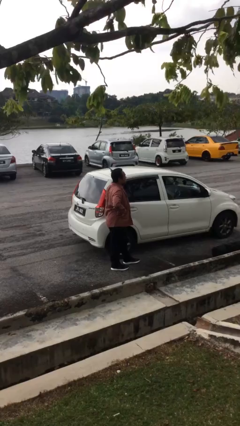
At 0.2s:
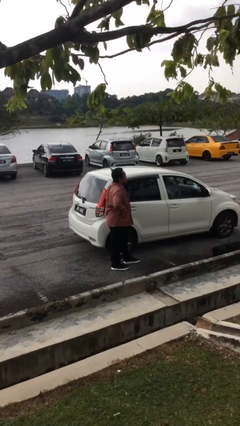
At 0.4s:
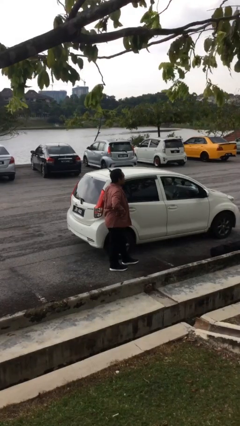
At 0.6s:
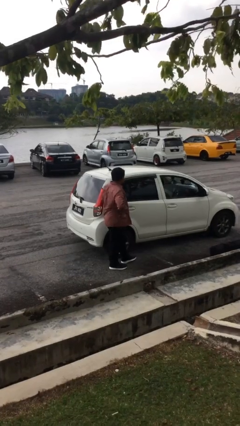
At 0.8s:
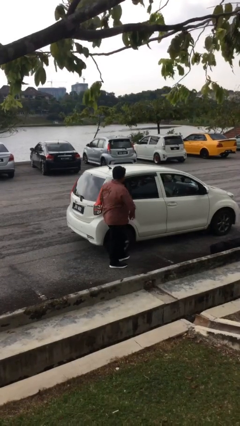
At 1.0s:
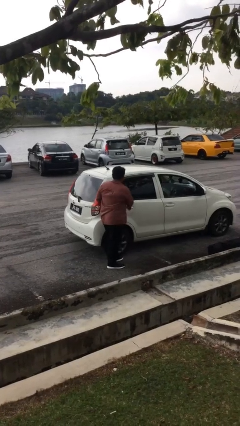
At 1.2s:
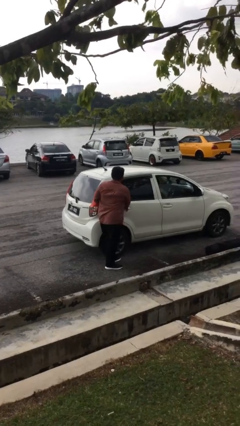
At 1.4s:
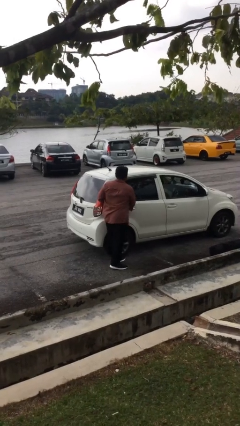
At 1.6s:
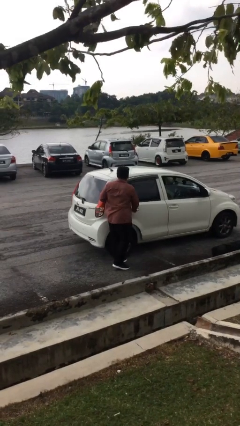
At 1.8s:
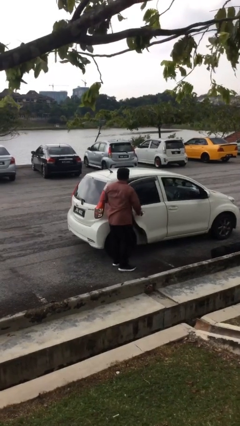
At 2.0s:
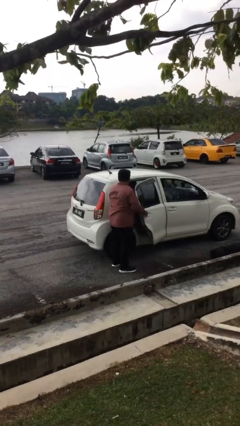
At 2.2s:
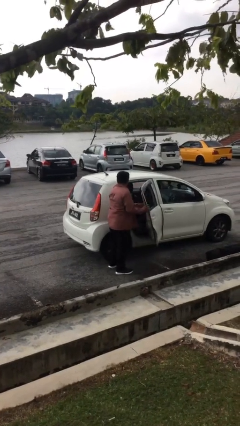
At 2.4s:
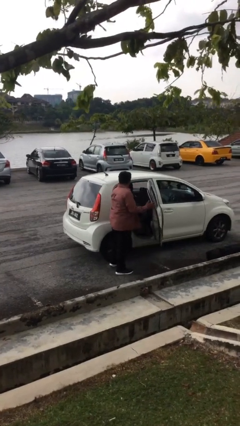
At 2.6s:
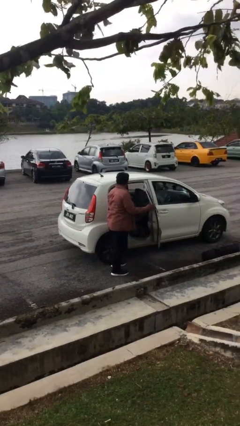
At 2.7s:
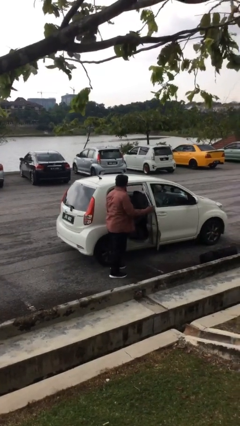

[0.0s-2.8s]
person opens car door

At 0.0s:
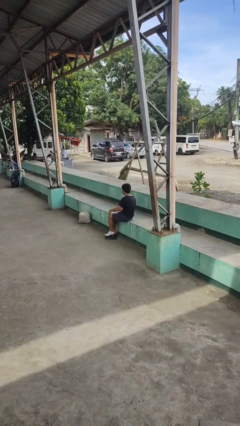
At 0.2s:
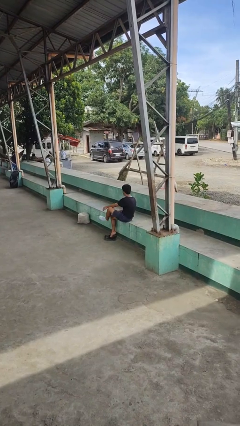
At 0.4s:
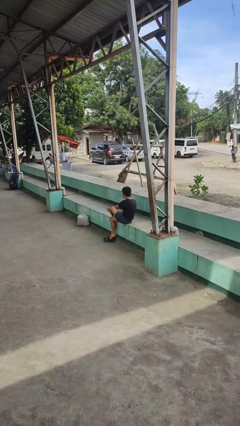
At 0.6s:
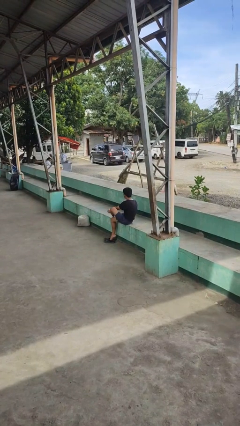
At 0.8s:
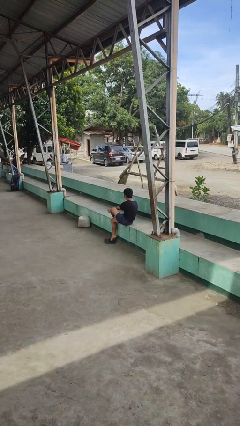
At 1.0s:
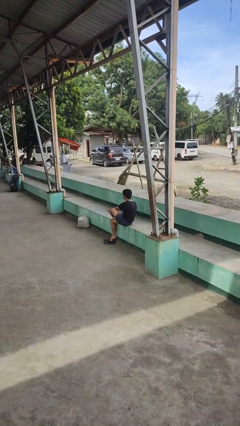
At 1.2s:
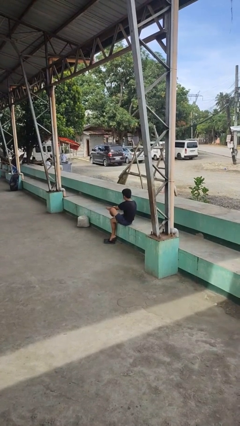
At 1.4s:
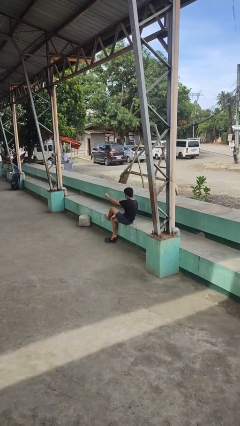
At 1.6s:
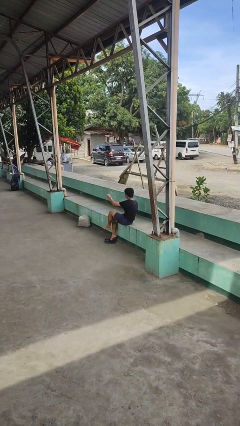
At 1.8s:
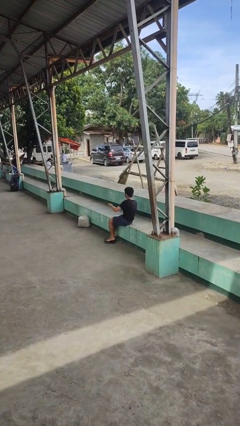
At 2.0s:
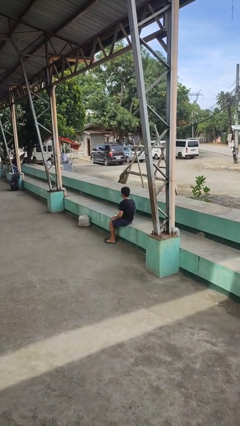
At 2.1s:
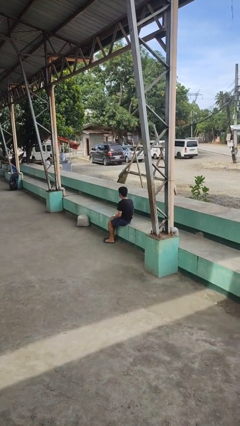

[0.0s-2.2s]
person takes off socks

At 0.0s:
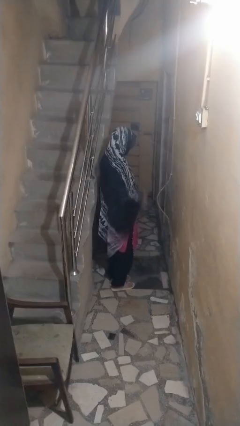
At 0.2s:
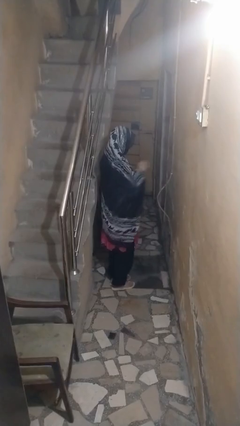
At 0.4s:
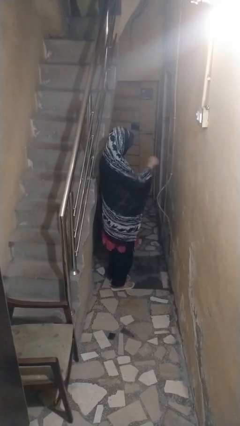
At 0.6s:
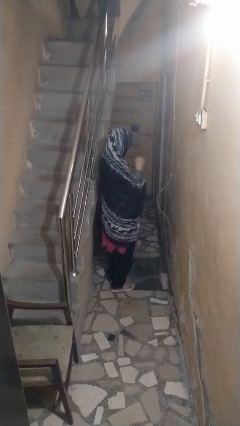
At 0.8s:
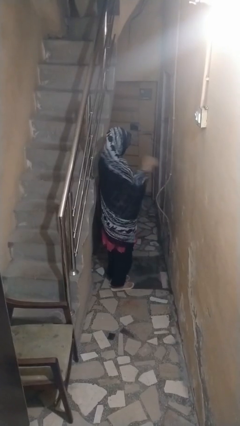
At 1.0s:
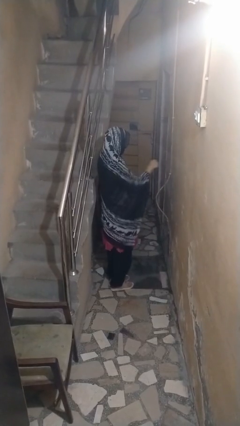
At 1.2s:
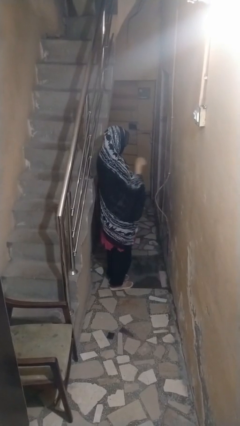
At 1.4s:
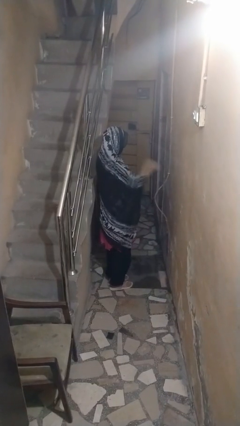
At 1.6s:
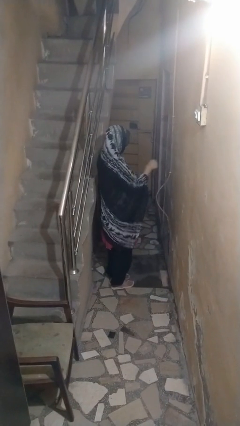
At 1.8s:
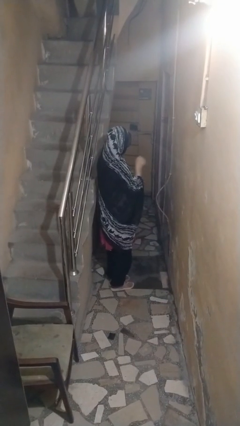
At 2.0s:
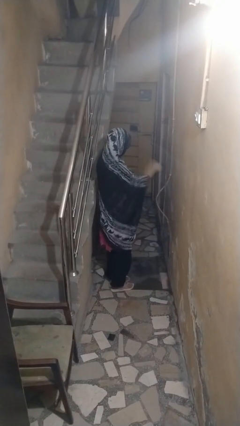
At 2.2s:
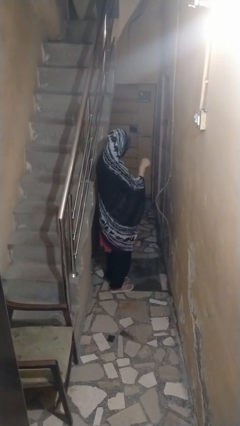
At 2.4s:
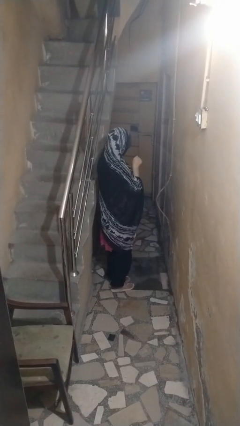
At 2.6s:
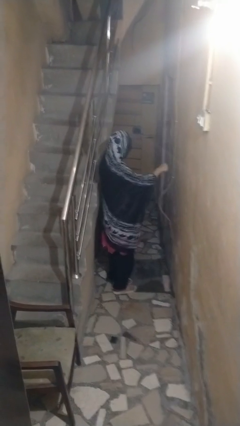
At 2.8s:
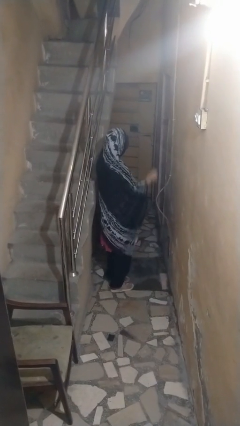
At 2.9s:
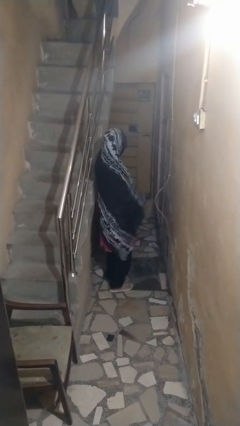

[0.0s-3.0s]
person punches

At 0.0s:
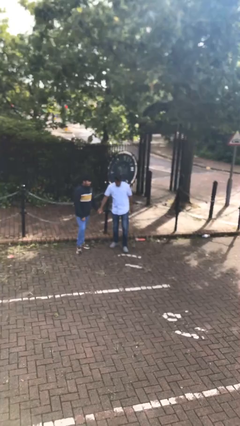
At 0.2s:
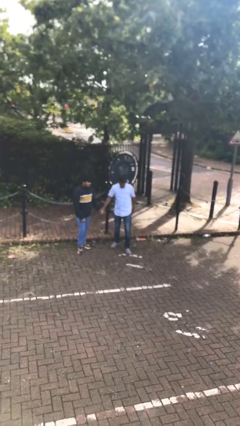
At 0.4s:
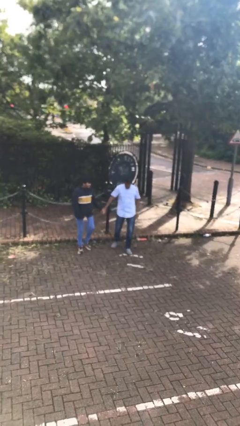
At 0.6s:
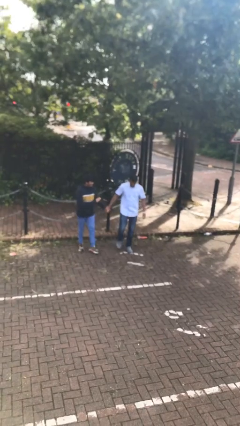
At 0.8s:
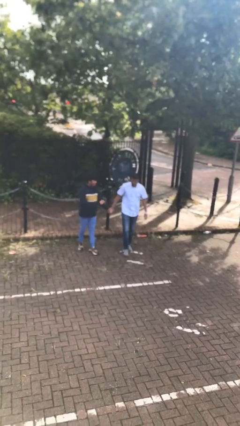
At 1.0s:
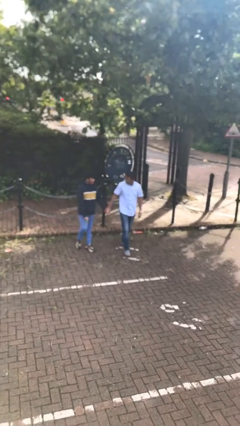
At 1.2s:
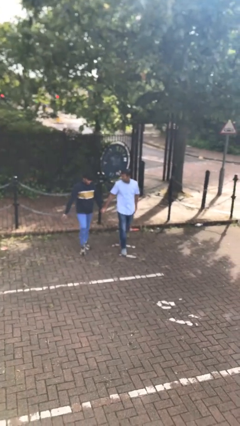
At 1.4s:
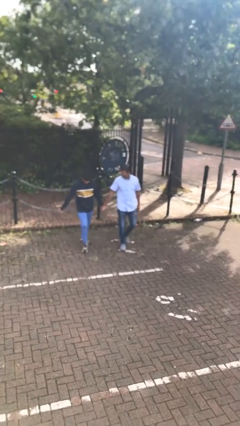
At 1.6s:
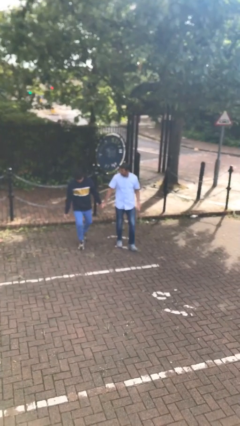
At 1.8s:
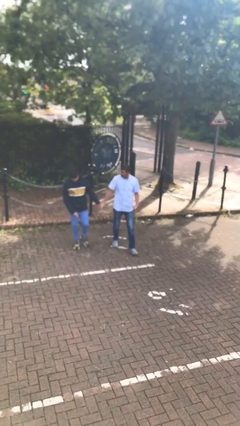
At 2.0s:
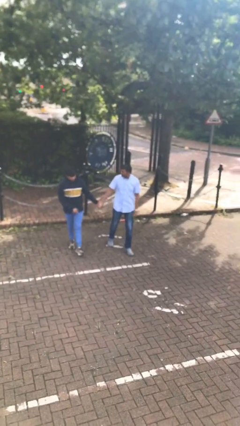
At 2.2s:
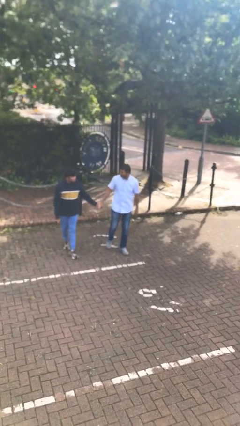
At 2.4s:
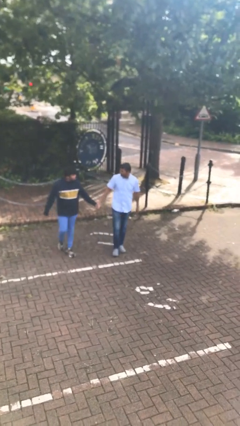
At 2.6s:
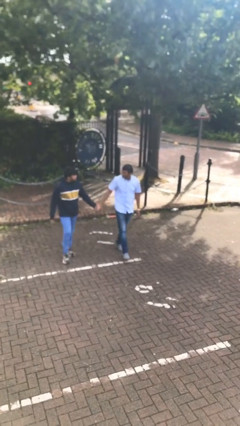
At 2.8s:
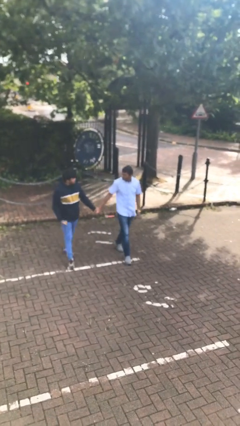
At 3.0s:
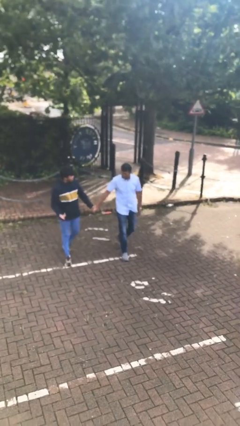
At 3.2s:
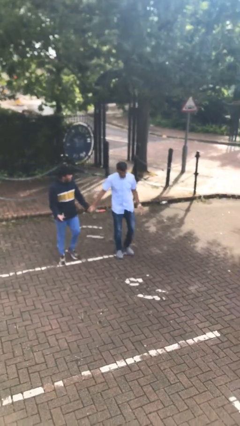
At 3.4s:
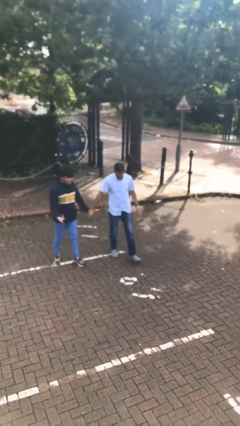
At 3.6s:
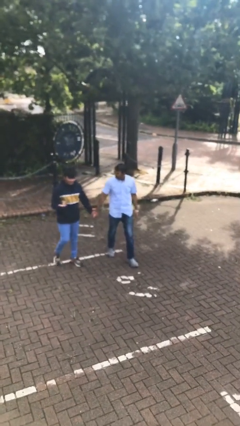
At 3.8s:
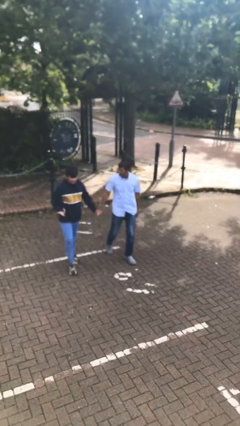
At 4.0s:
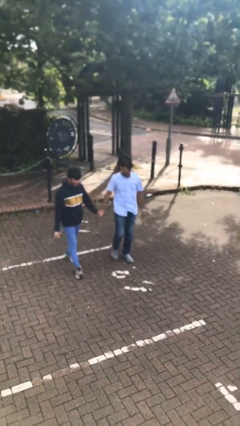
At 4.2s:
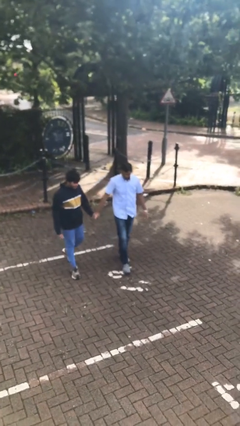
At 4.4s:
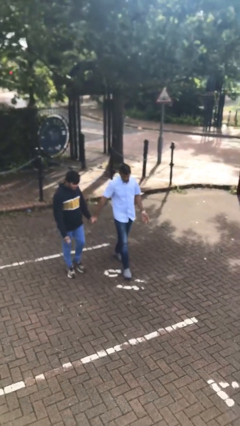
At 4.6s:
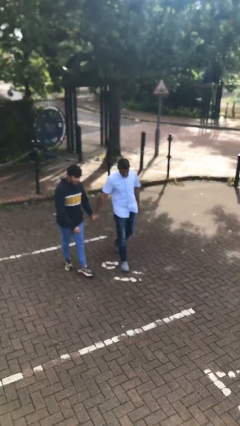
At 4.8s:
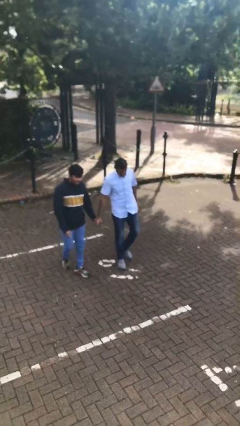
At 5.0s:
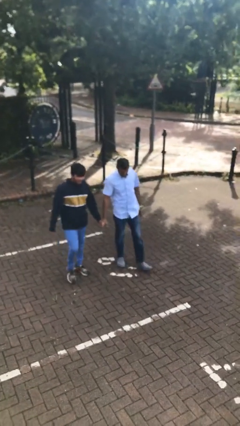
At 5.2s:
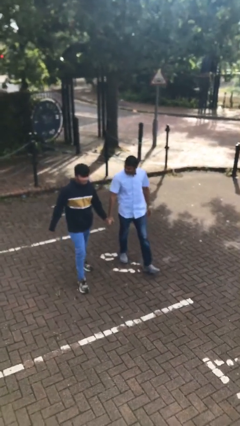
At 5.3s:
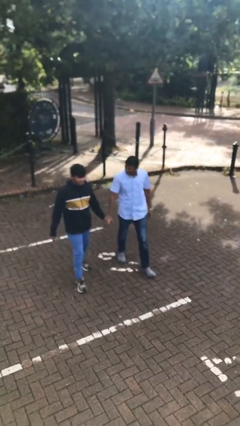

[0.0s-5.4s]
person holds hand

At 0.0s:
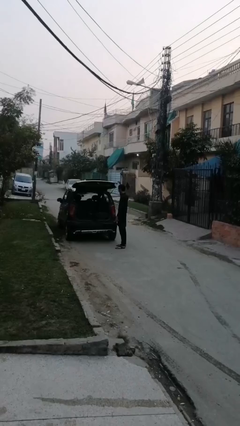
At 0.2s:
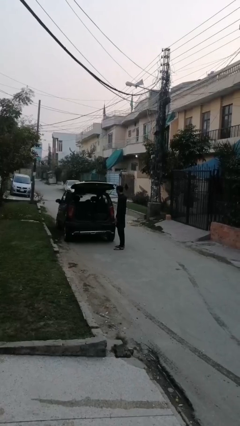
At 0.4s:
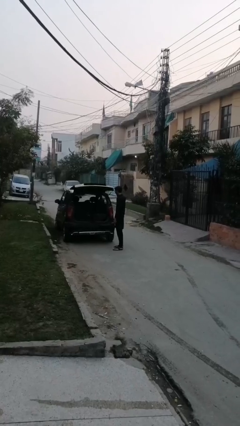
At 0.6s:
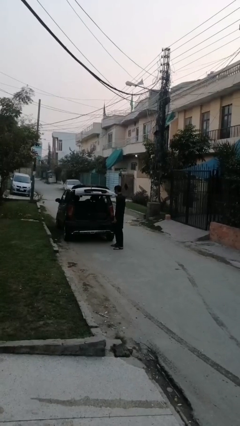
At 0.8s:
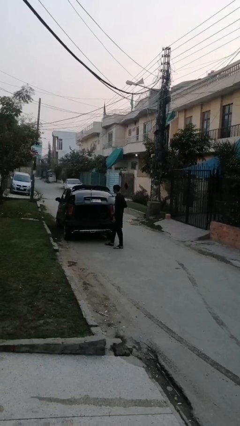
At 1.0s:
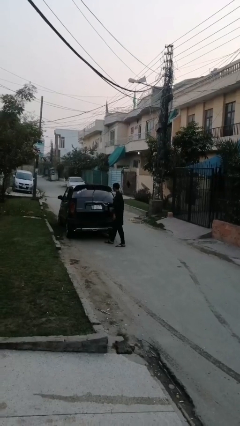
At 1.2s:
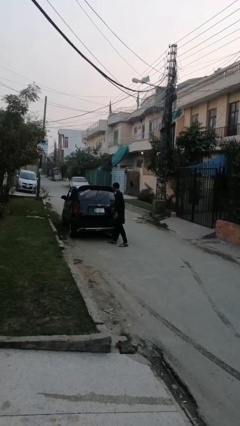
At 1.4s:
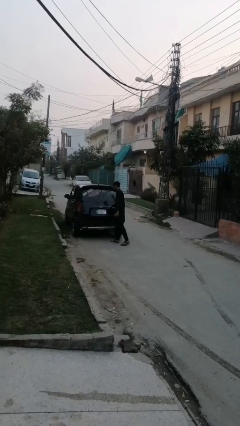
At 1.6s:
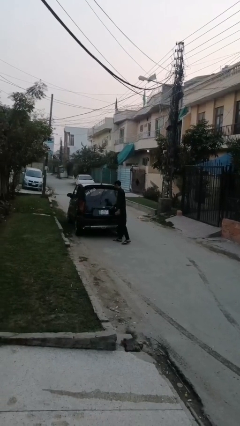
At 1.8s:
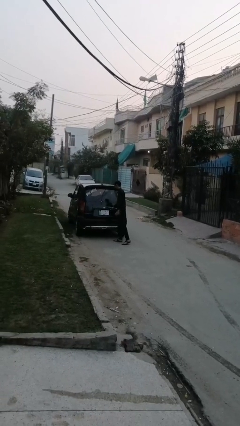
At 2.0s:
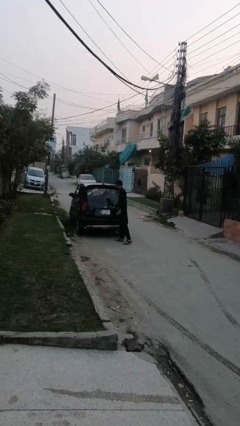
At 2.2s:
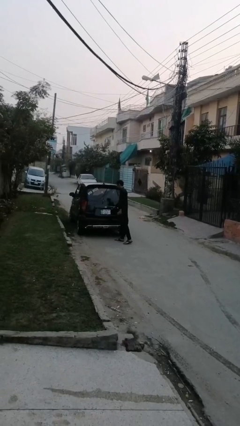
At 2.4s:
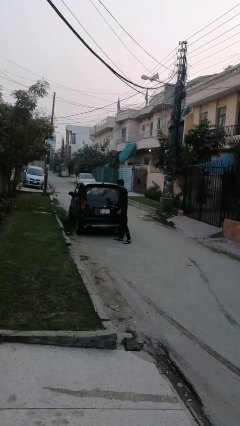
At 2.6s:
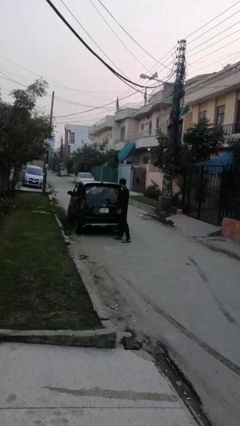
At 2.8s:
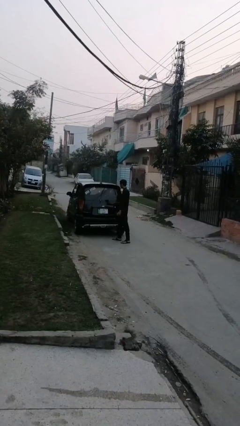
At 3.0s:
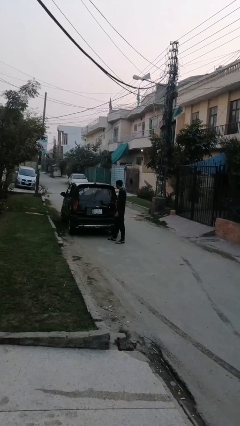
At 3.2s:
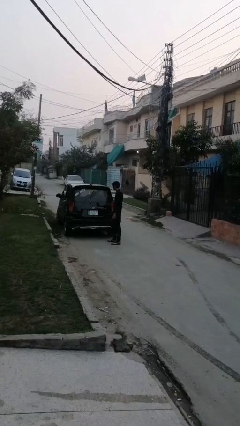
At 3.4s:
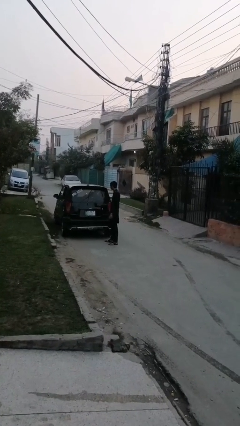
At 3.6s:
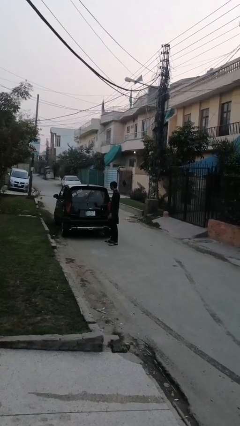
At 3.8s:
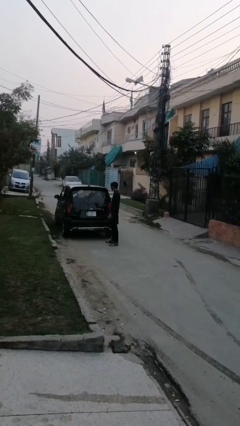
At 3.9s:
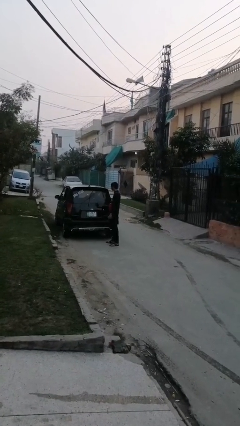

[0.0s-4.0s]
person closes car trunk

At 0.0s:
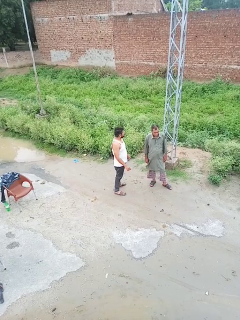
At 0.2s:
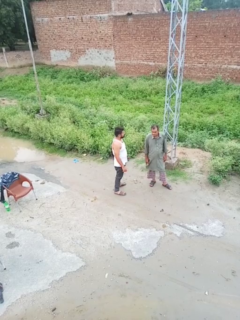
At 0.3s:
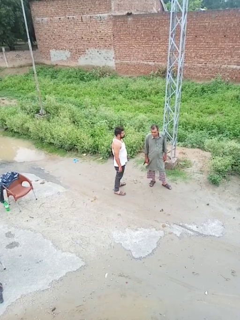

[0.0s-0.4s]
person points at person
